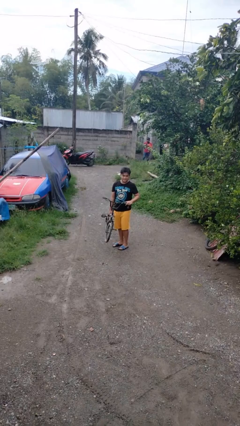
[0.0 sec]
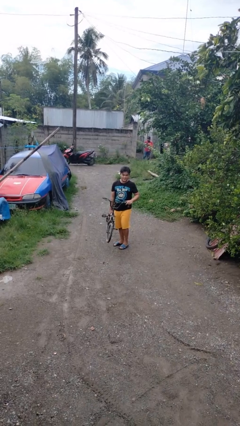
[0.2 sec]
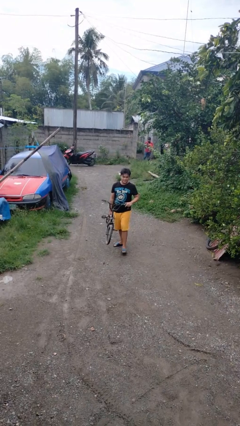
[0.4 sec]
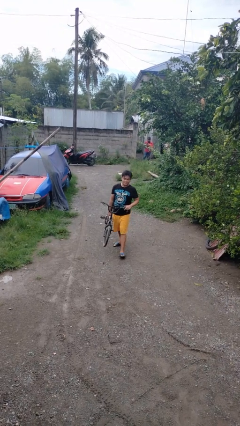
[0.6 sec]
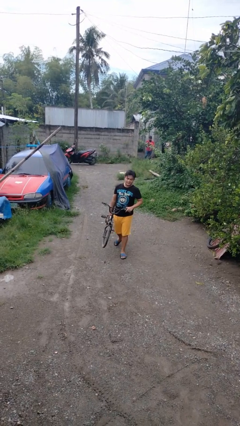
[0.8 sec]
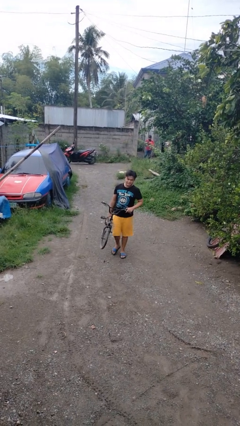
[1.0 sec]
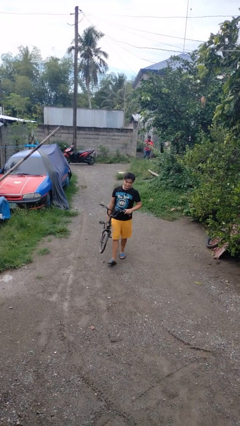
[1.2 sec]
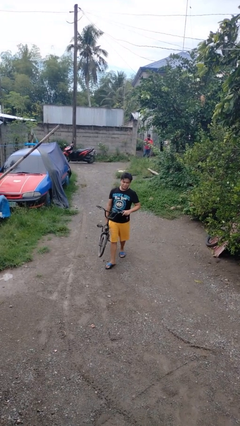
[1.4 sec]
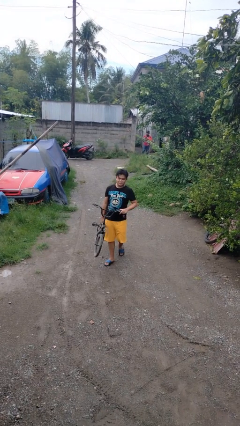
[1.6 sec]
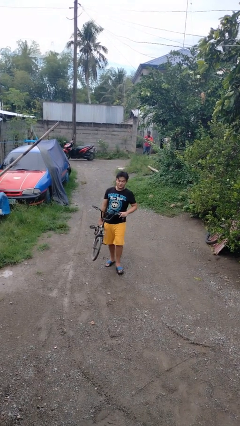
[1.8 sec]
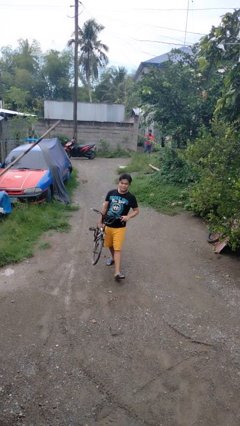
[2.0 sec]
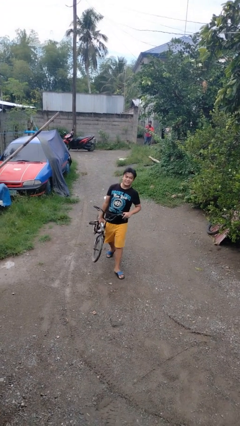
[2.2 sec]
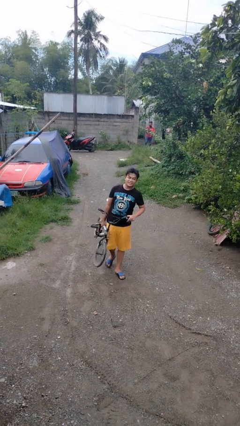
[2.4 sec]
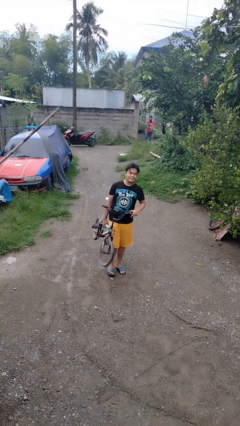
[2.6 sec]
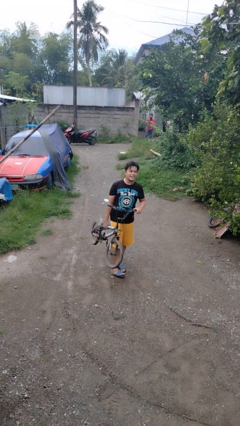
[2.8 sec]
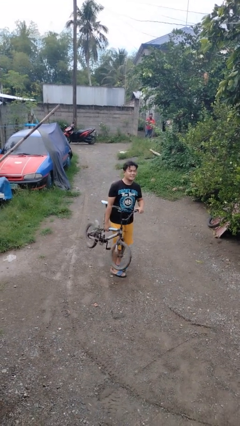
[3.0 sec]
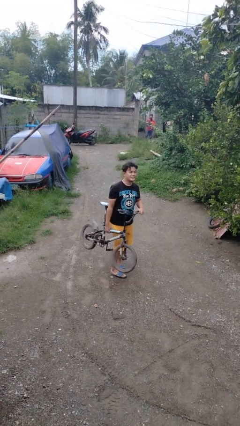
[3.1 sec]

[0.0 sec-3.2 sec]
person carries bicycle

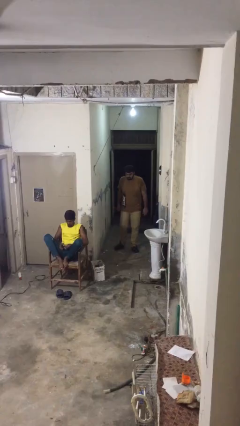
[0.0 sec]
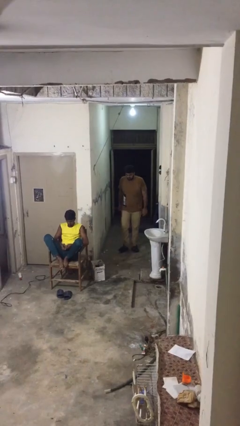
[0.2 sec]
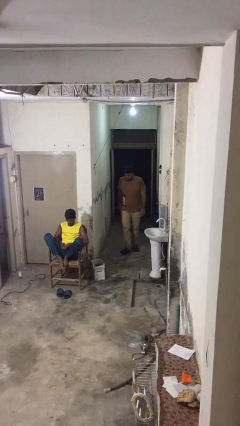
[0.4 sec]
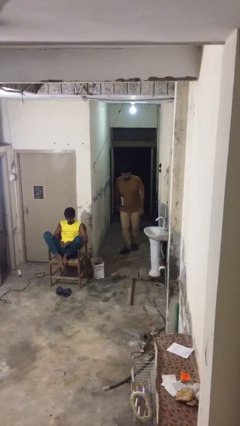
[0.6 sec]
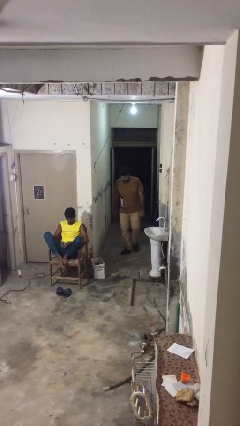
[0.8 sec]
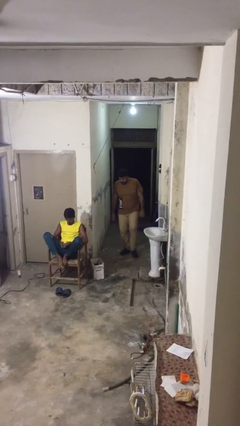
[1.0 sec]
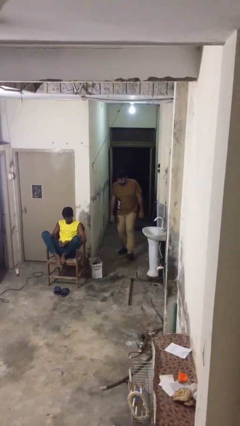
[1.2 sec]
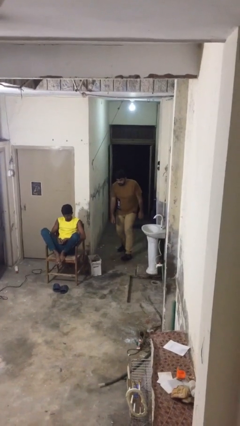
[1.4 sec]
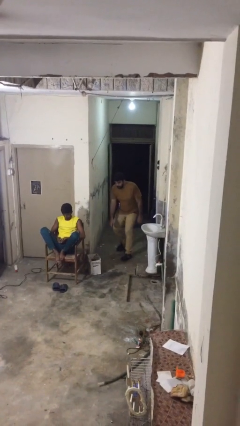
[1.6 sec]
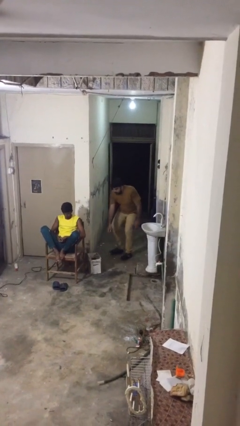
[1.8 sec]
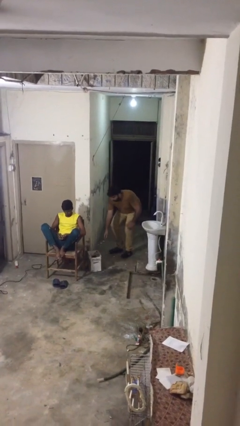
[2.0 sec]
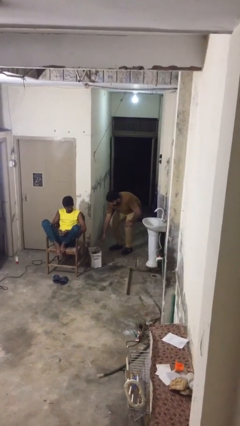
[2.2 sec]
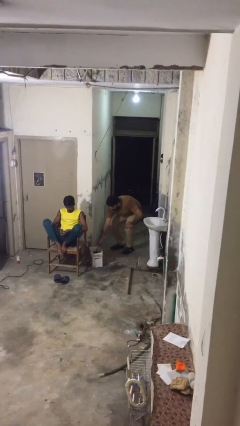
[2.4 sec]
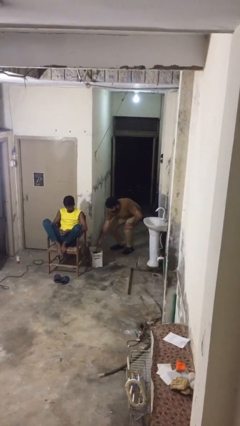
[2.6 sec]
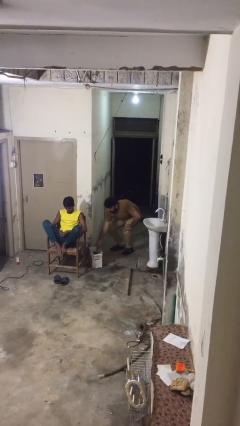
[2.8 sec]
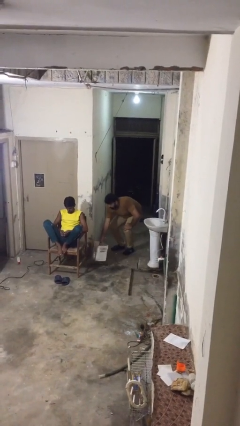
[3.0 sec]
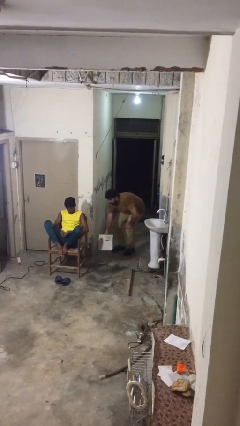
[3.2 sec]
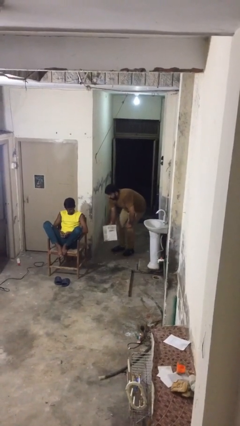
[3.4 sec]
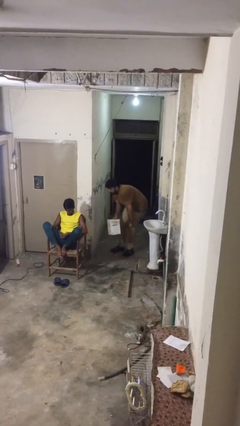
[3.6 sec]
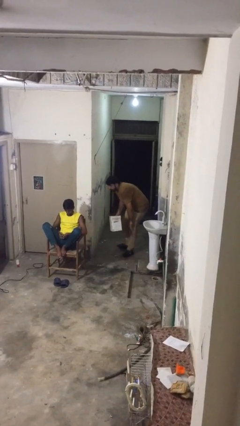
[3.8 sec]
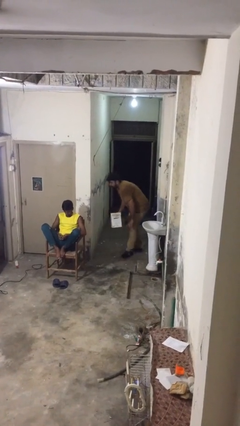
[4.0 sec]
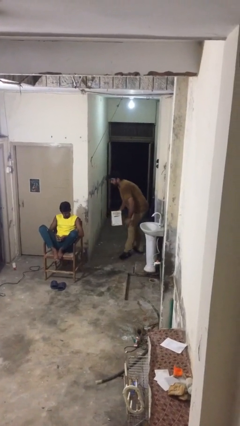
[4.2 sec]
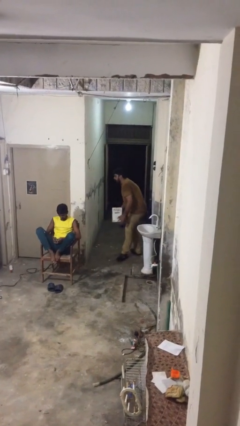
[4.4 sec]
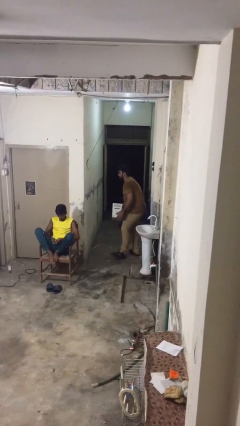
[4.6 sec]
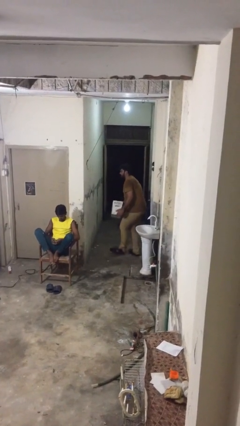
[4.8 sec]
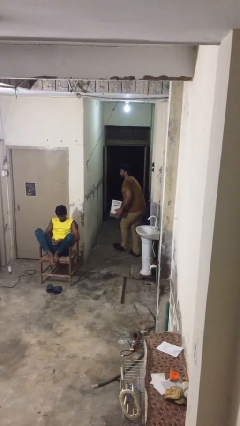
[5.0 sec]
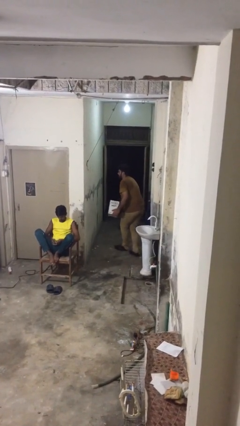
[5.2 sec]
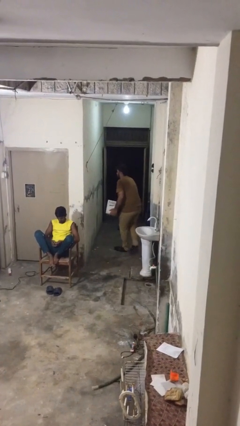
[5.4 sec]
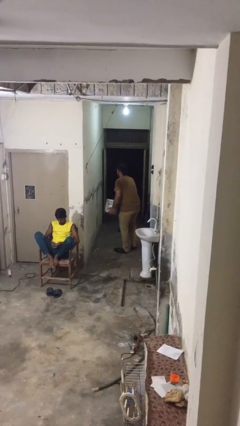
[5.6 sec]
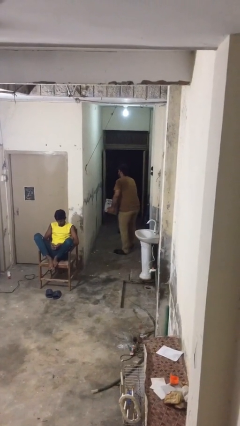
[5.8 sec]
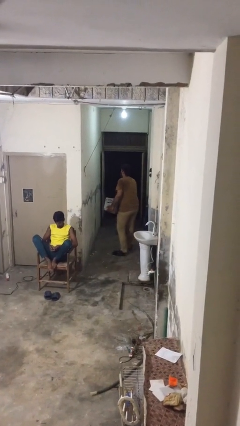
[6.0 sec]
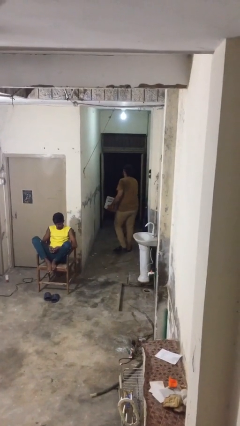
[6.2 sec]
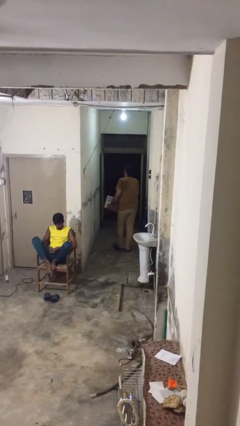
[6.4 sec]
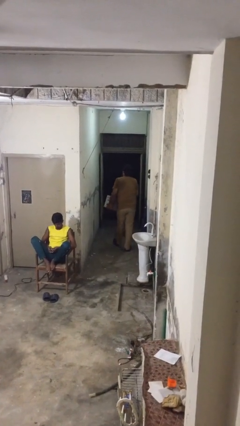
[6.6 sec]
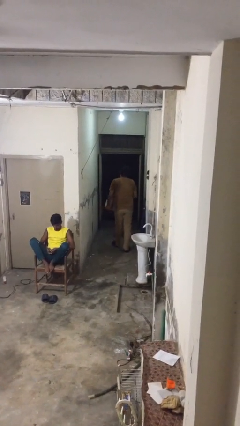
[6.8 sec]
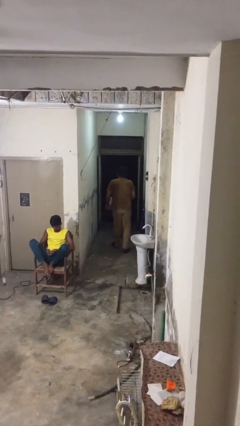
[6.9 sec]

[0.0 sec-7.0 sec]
person steals object from person

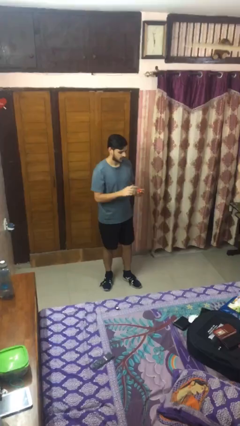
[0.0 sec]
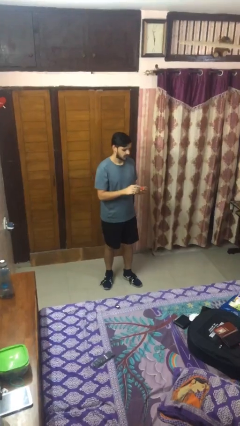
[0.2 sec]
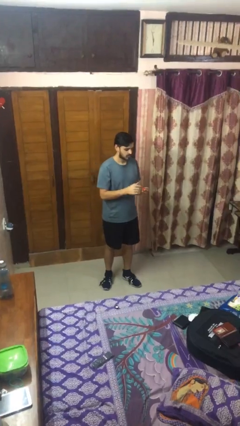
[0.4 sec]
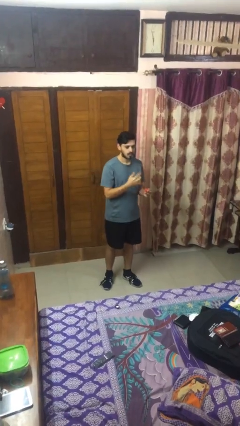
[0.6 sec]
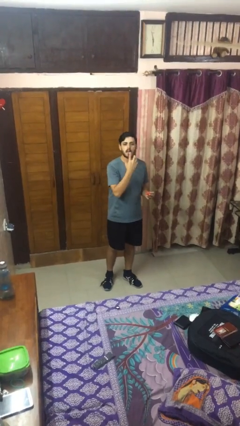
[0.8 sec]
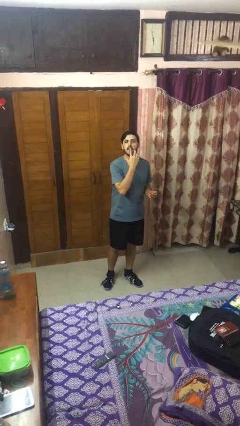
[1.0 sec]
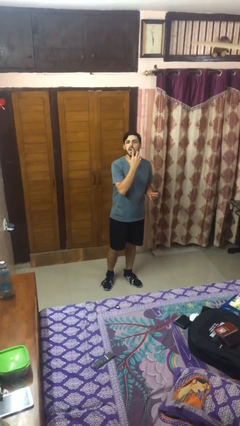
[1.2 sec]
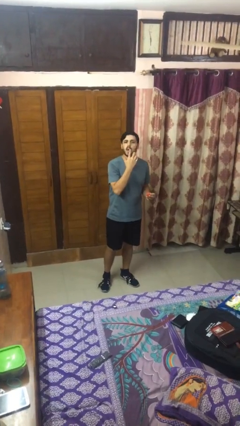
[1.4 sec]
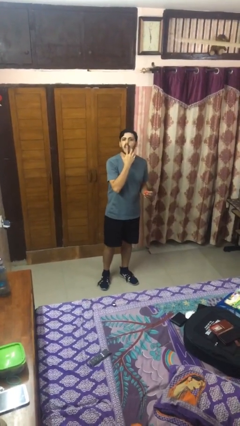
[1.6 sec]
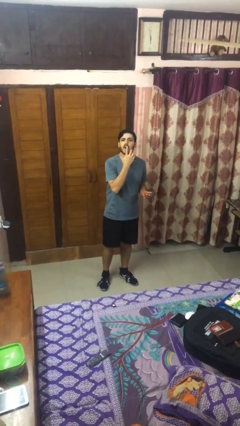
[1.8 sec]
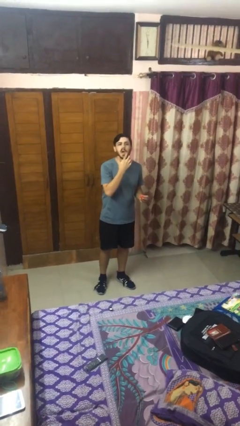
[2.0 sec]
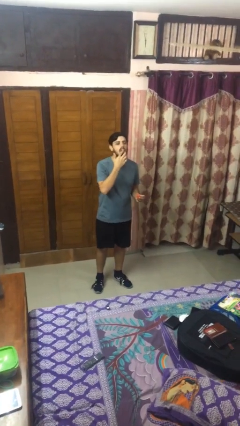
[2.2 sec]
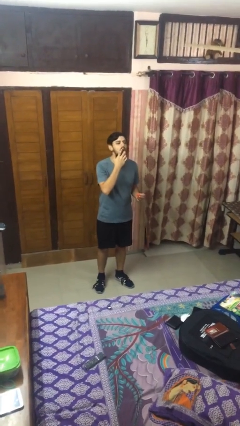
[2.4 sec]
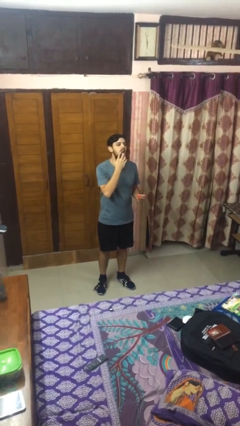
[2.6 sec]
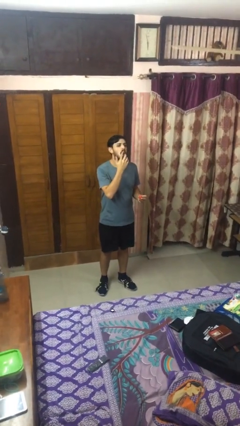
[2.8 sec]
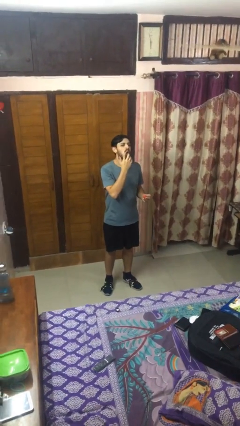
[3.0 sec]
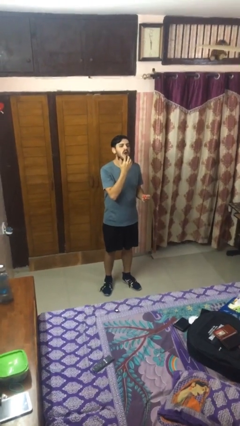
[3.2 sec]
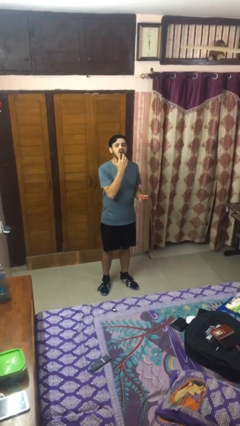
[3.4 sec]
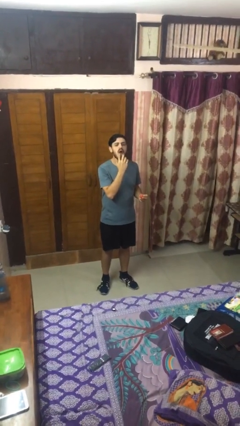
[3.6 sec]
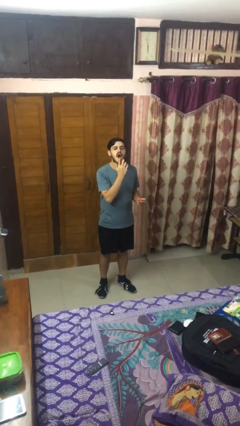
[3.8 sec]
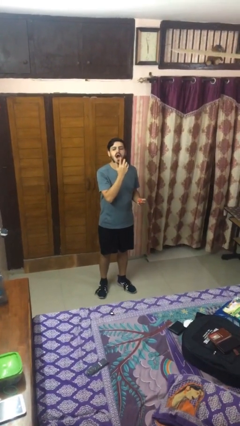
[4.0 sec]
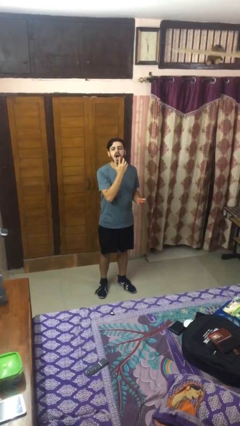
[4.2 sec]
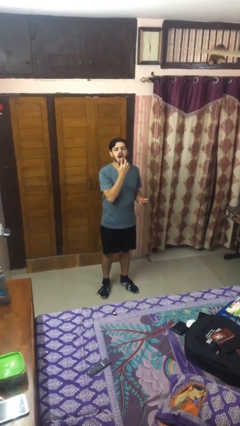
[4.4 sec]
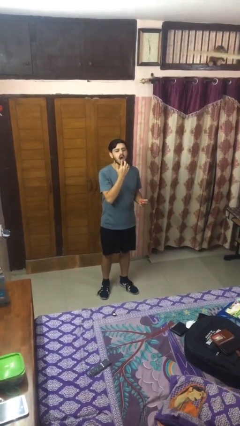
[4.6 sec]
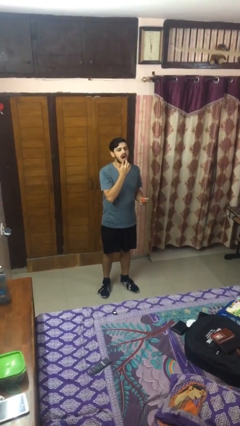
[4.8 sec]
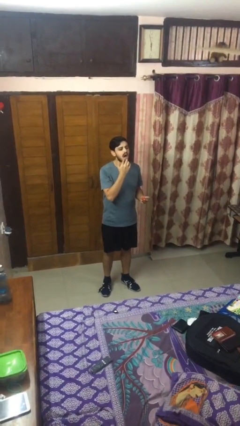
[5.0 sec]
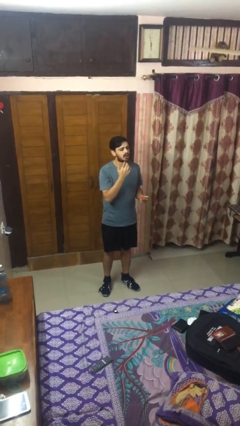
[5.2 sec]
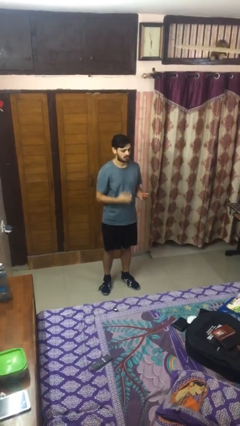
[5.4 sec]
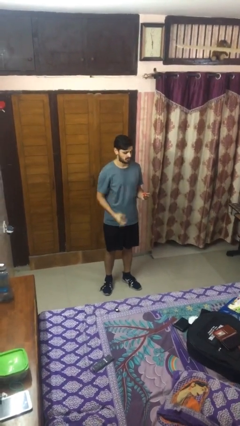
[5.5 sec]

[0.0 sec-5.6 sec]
person applies lip makeup

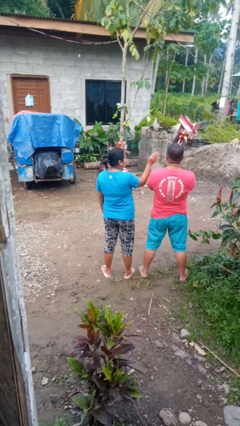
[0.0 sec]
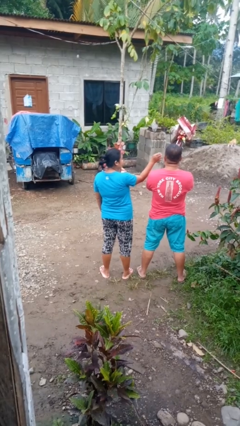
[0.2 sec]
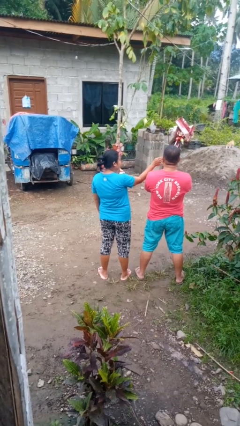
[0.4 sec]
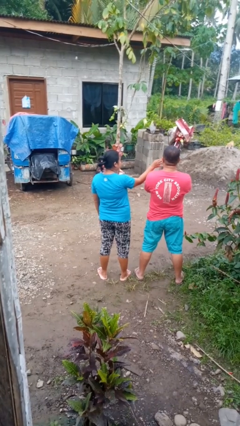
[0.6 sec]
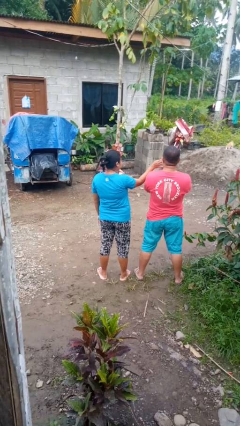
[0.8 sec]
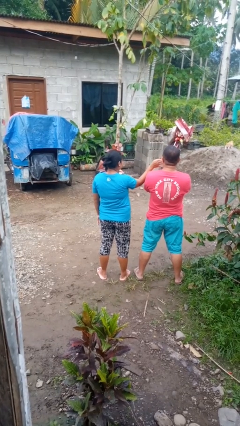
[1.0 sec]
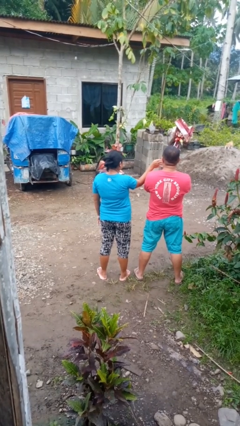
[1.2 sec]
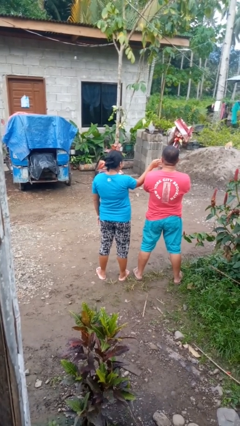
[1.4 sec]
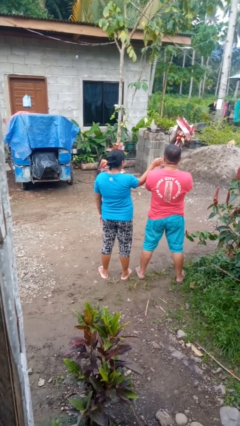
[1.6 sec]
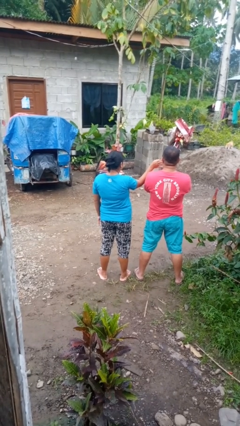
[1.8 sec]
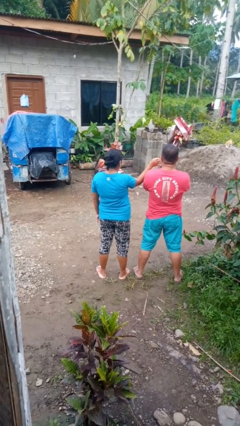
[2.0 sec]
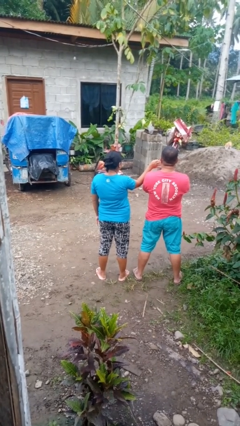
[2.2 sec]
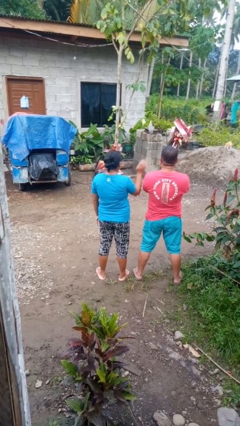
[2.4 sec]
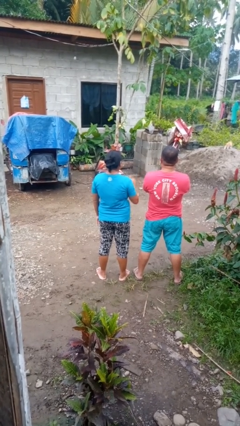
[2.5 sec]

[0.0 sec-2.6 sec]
person touches face of person
